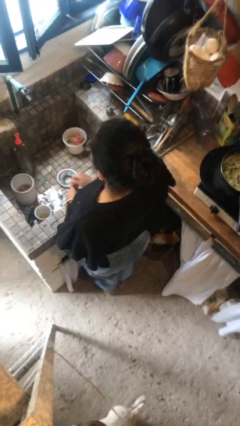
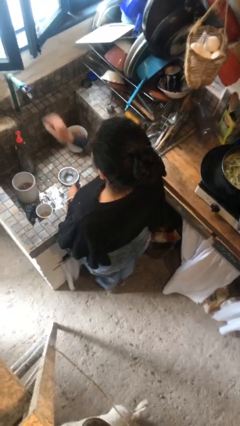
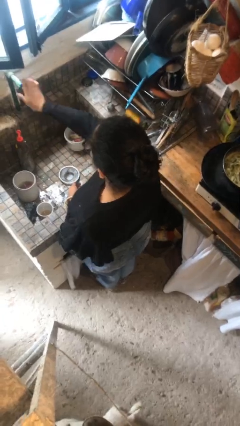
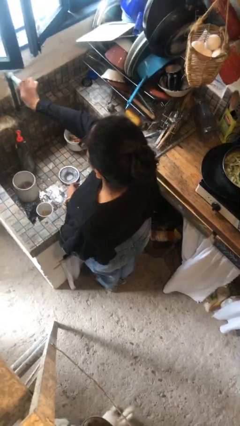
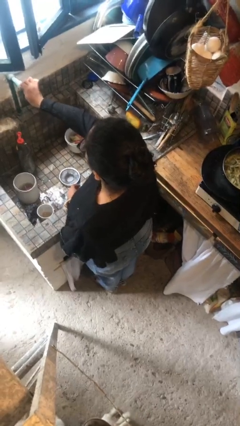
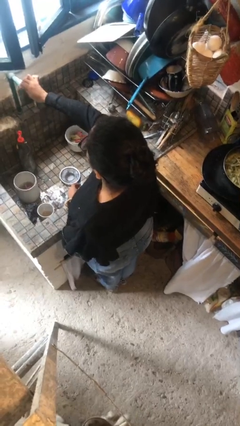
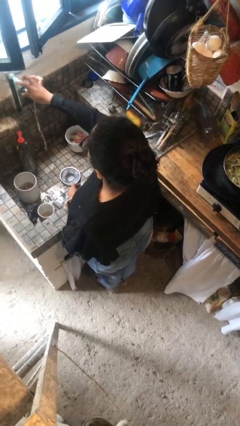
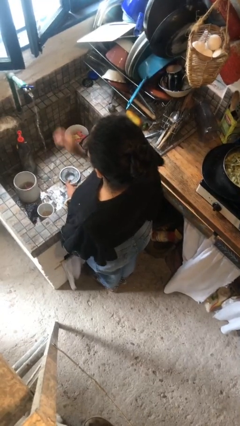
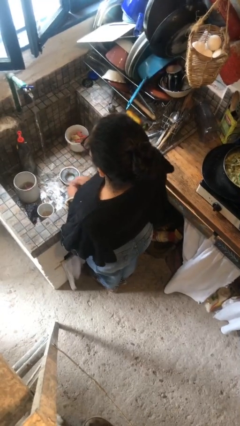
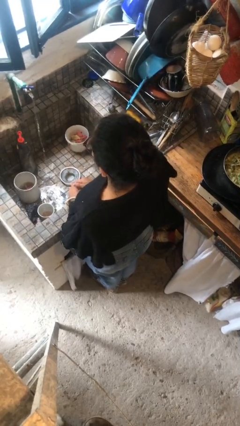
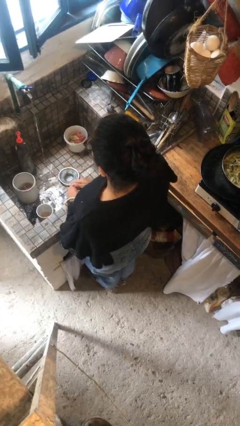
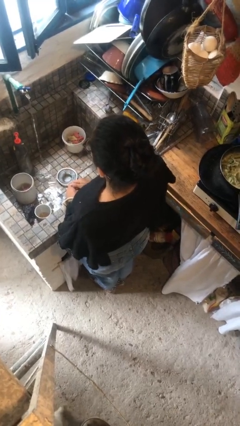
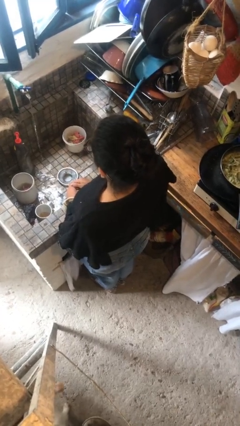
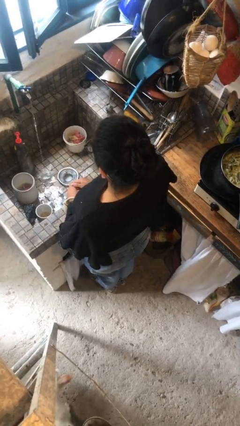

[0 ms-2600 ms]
person turns on faucet

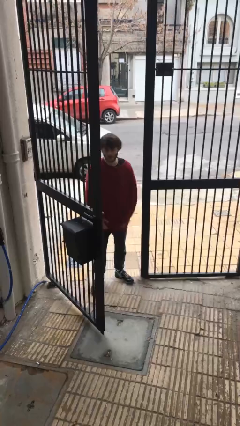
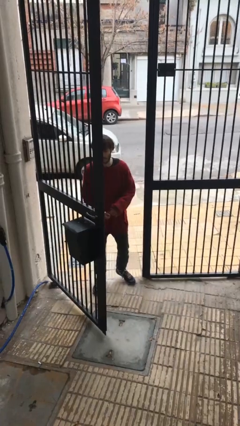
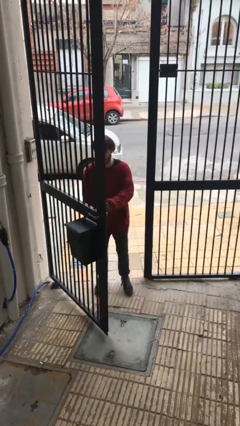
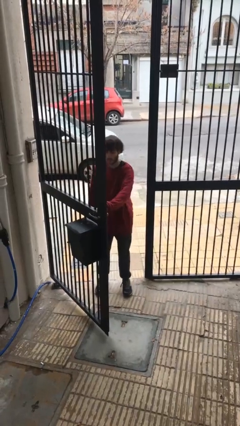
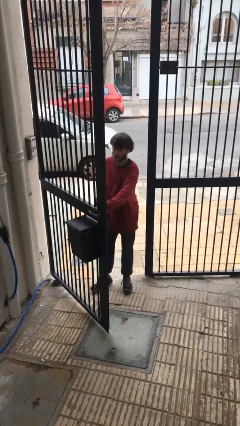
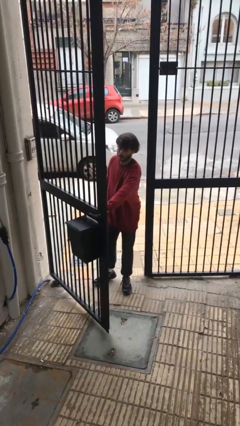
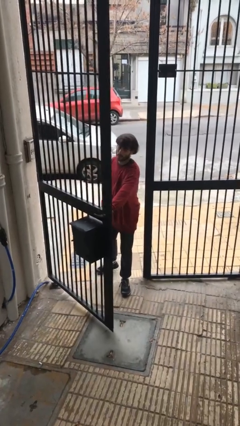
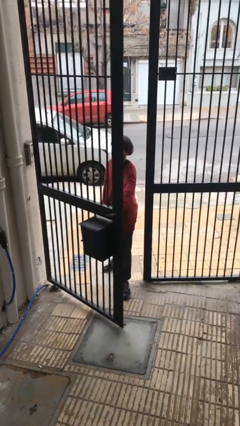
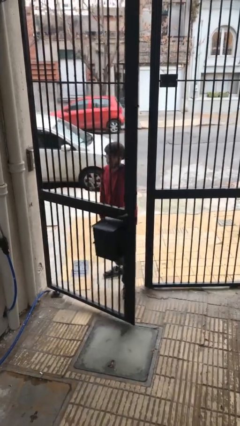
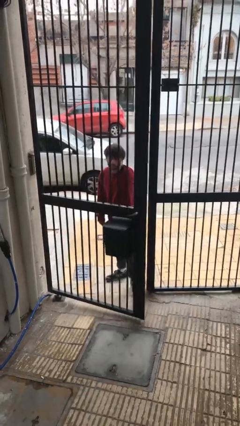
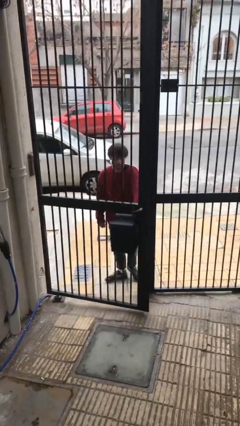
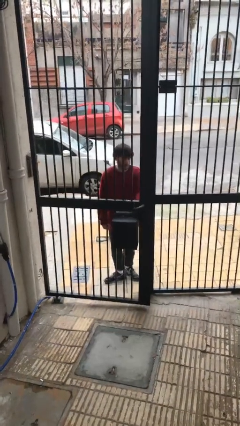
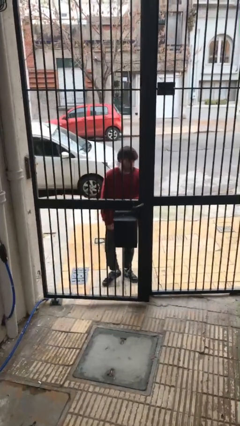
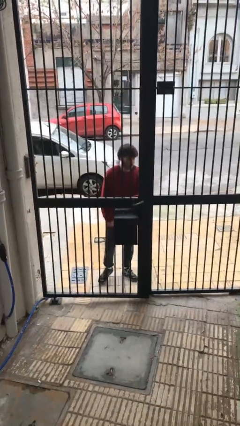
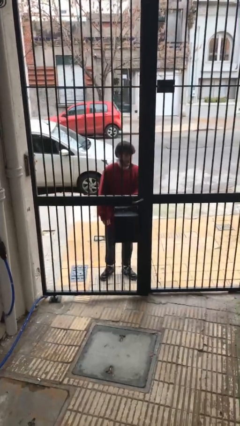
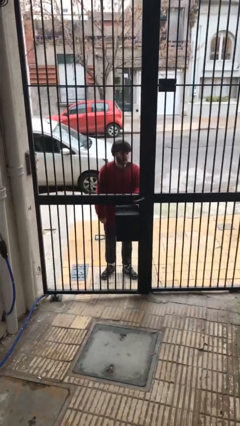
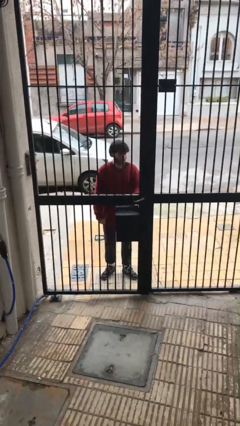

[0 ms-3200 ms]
person closes gate

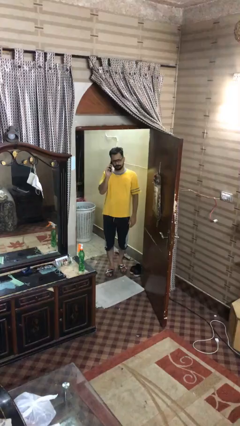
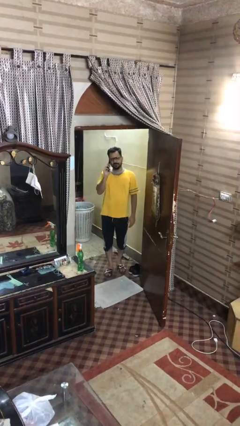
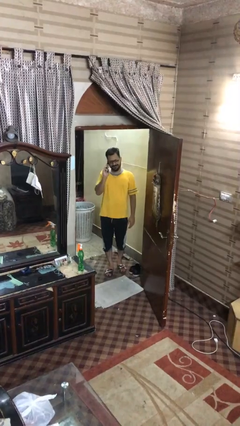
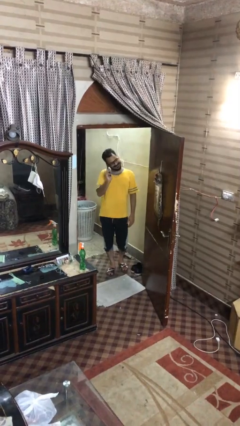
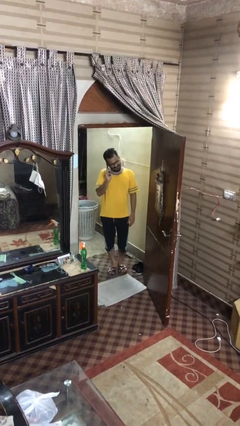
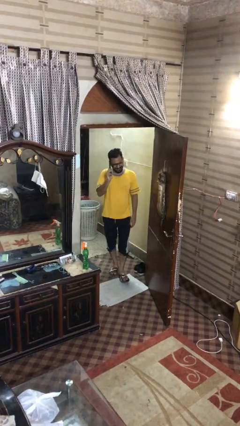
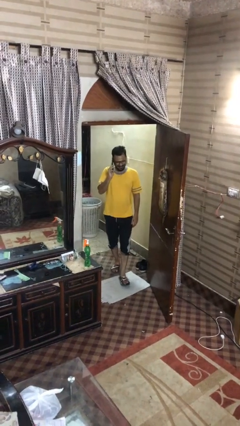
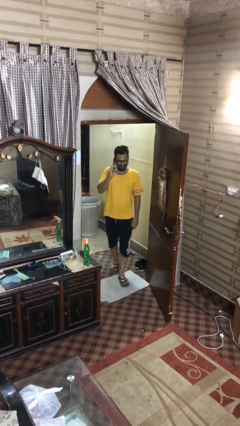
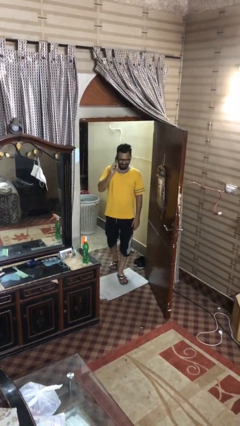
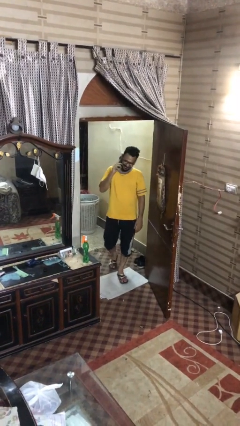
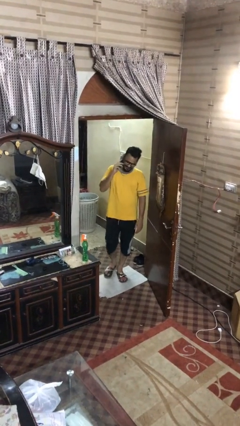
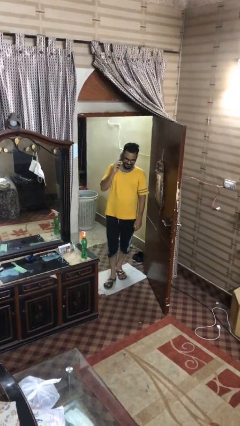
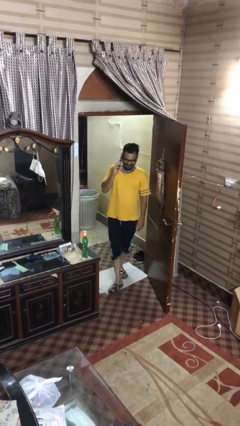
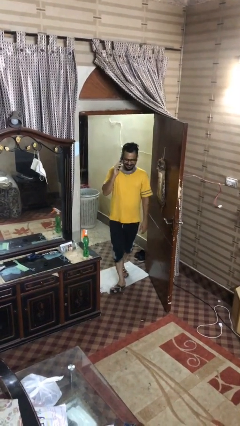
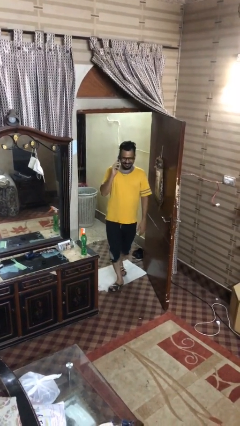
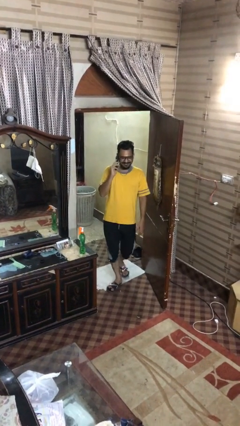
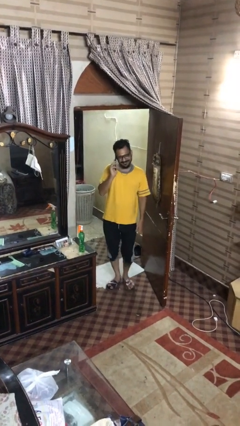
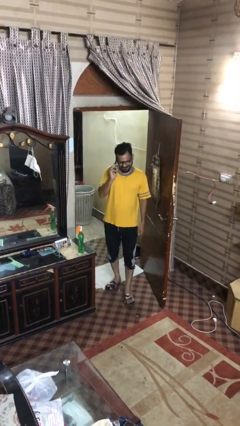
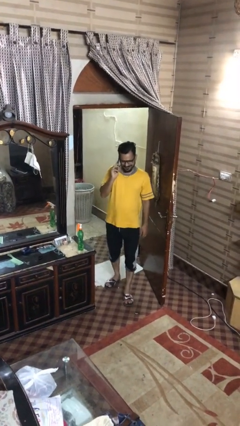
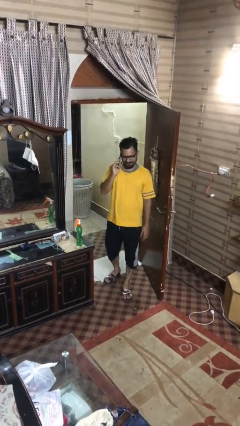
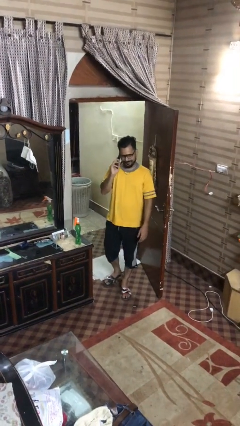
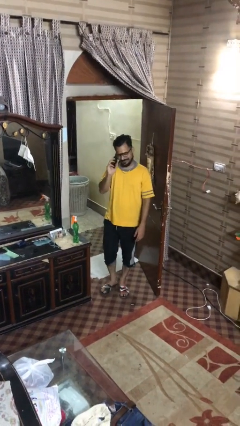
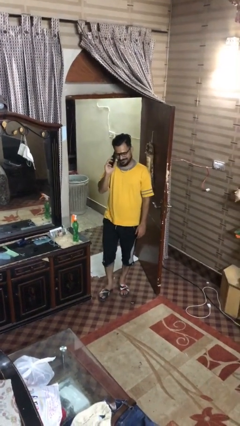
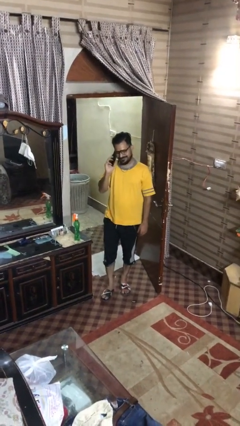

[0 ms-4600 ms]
person enters scene through structure

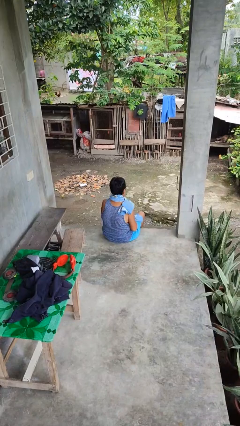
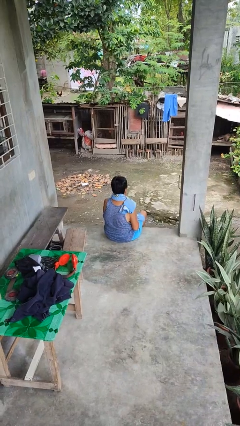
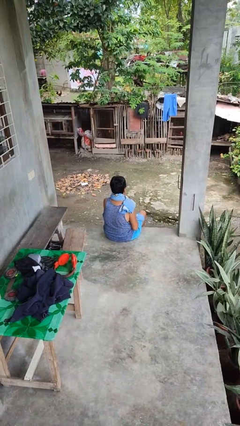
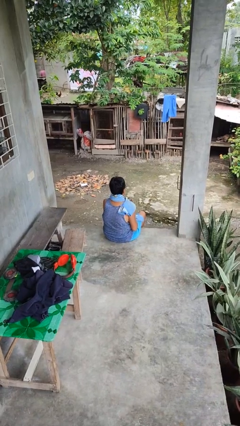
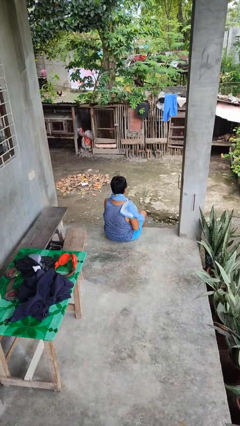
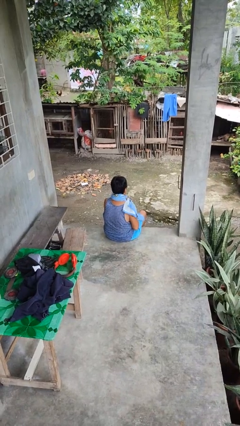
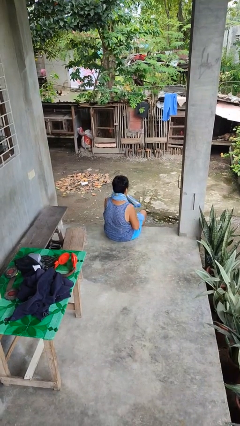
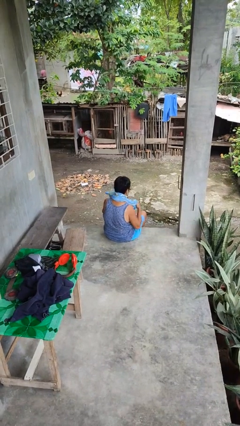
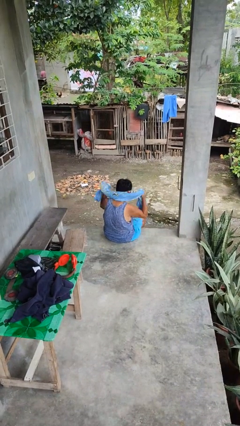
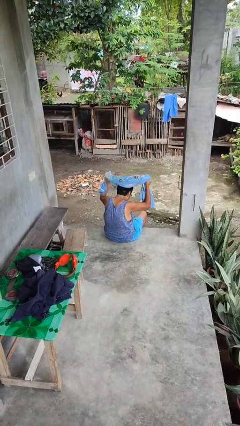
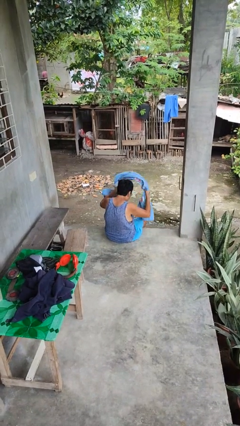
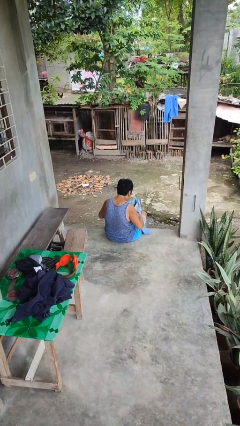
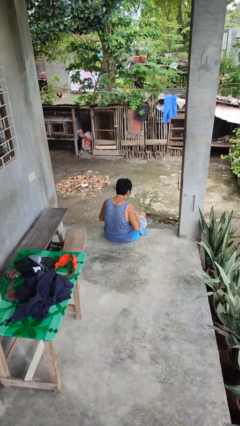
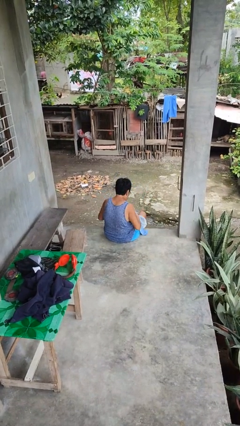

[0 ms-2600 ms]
person takes off scarf

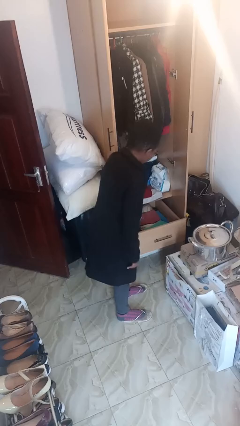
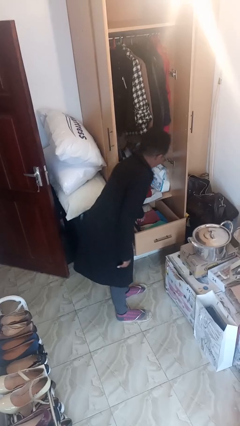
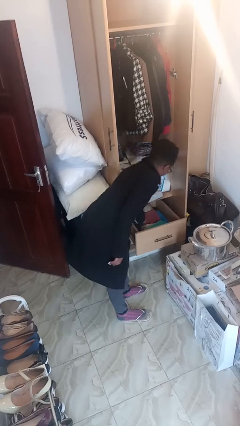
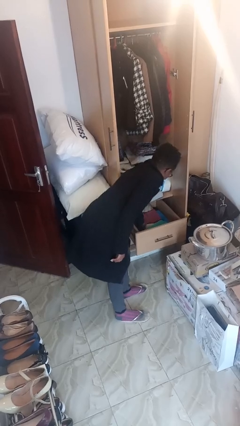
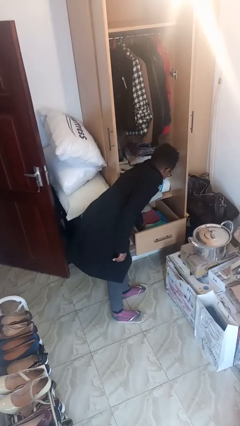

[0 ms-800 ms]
person takes clothes from dresser

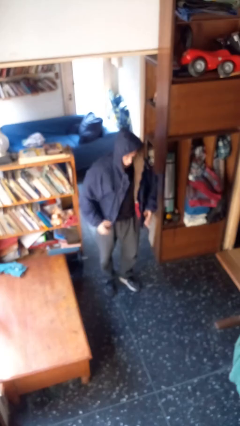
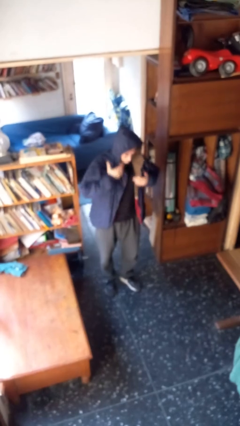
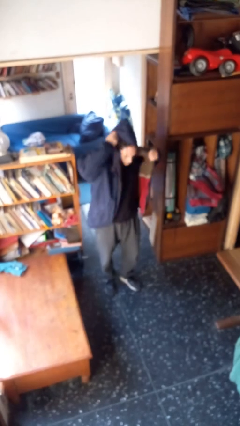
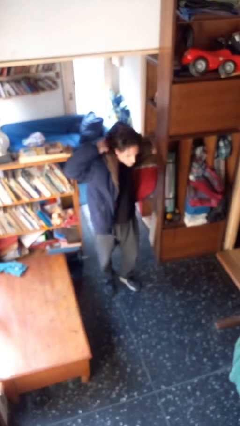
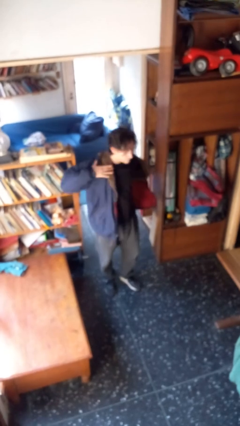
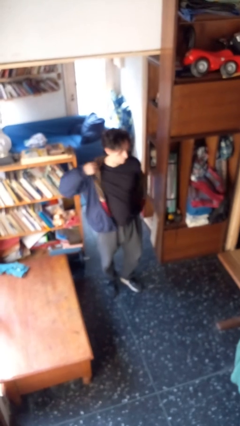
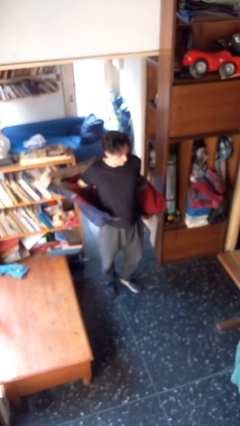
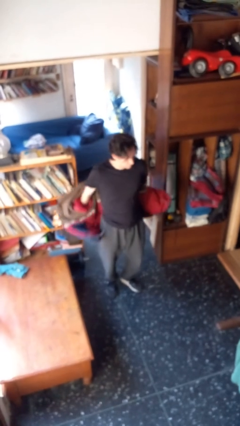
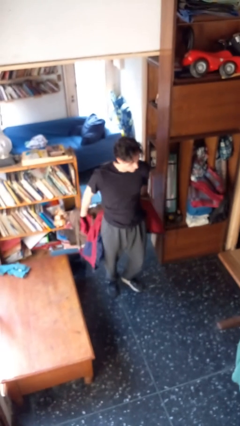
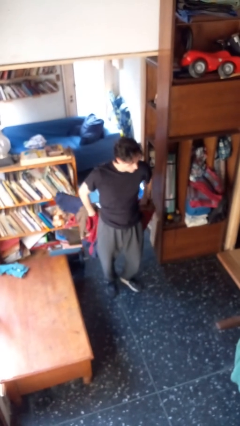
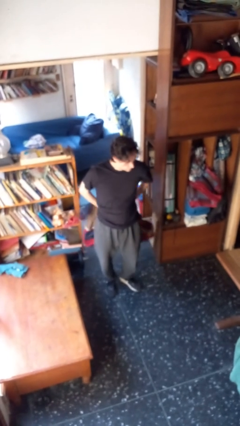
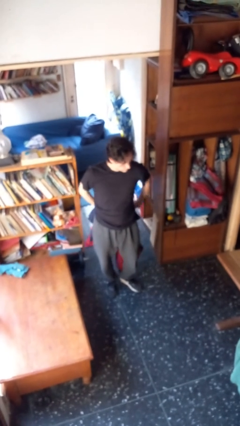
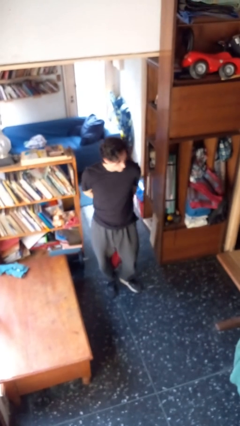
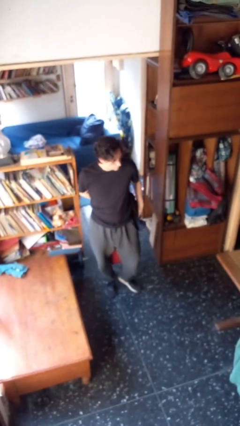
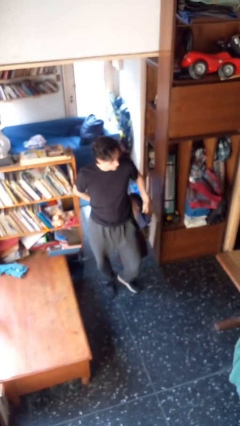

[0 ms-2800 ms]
person takes off hoodie

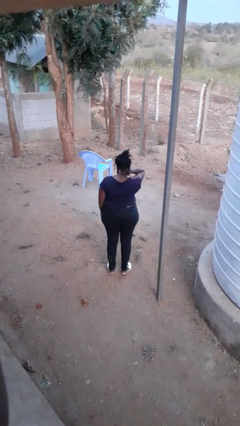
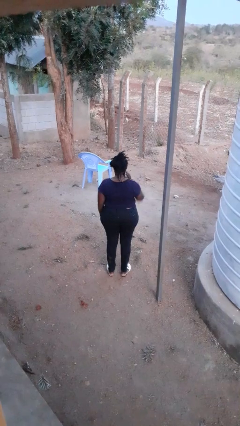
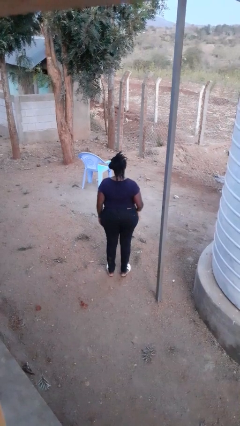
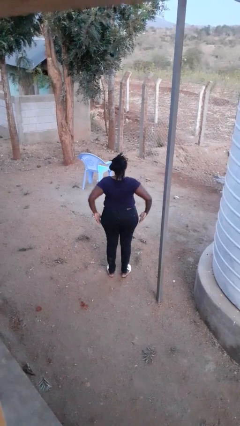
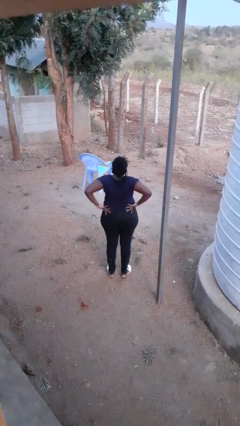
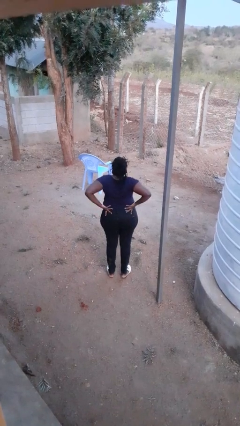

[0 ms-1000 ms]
person rubs neck
